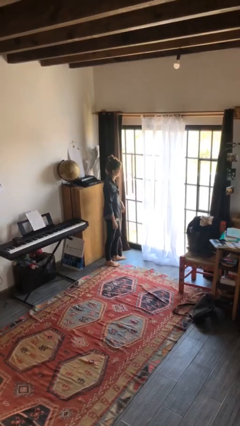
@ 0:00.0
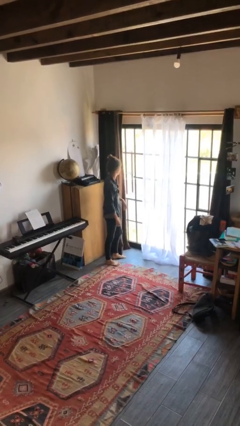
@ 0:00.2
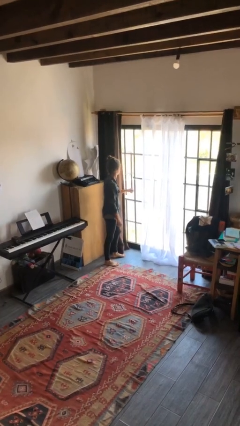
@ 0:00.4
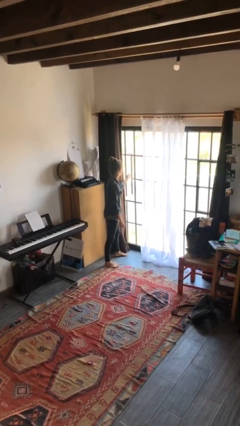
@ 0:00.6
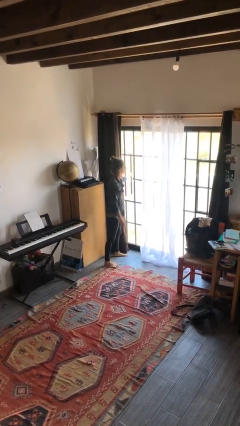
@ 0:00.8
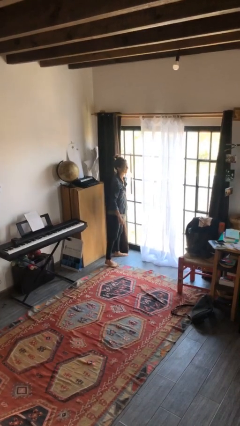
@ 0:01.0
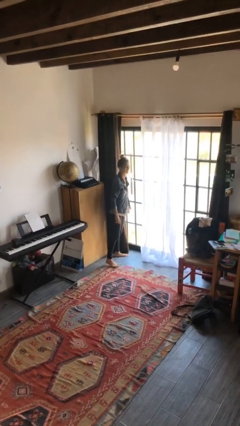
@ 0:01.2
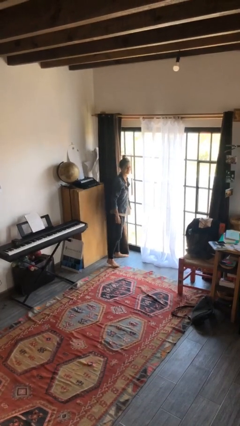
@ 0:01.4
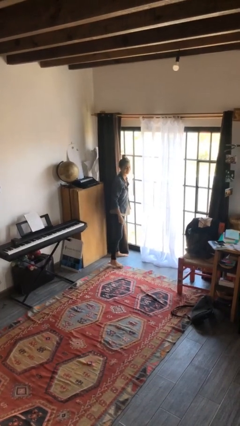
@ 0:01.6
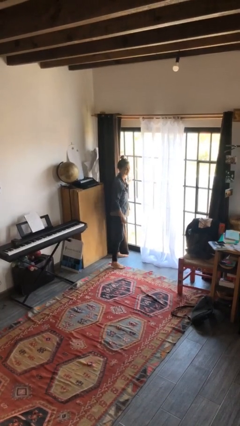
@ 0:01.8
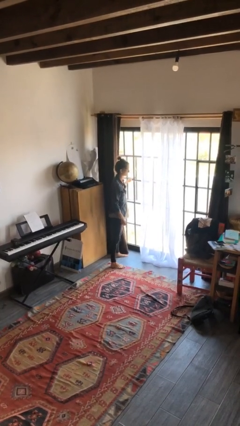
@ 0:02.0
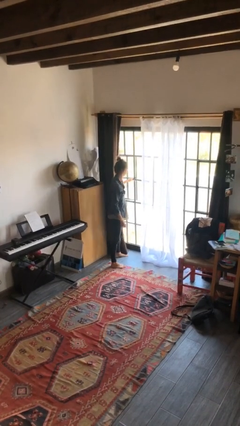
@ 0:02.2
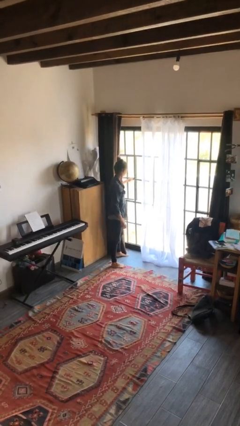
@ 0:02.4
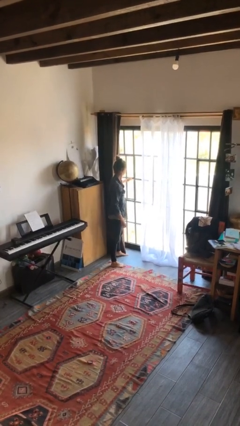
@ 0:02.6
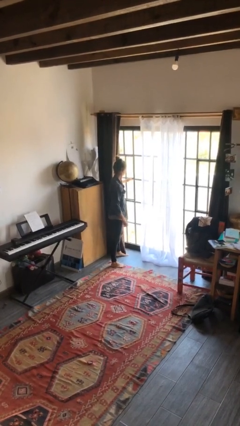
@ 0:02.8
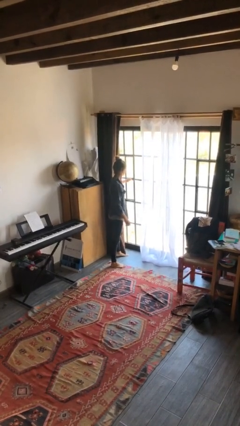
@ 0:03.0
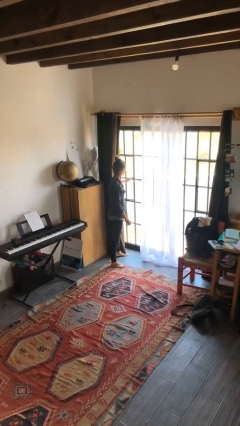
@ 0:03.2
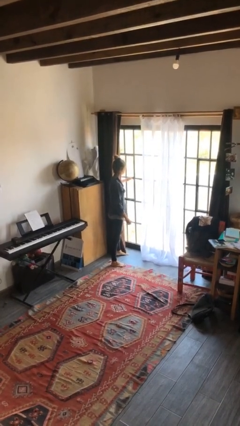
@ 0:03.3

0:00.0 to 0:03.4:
person closes home window

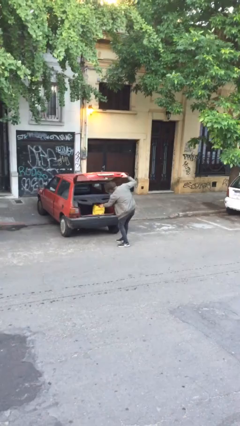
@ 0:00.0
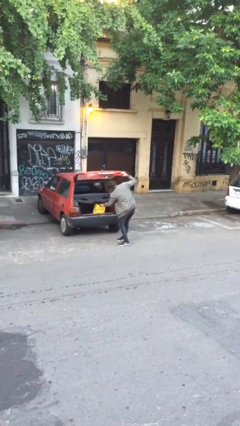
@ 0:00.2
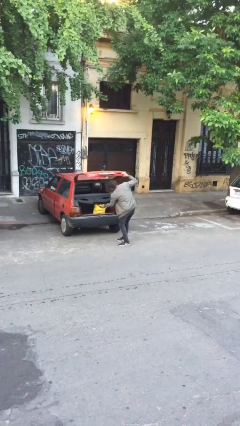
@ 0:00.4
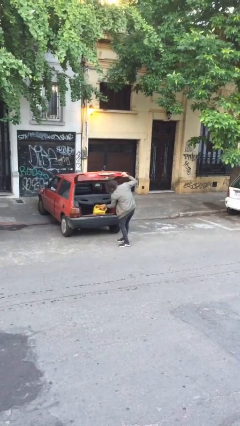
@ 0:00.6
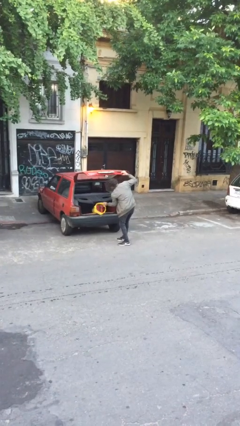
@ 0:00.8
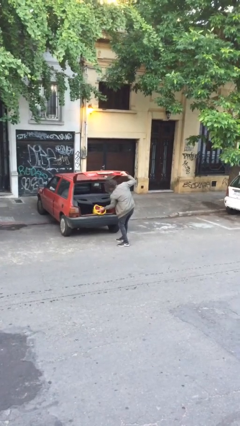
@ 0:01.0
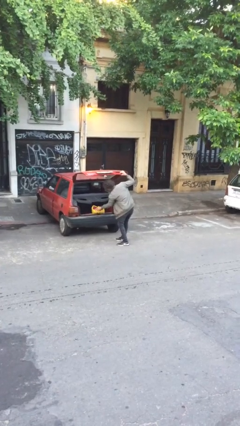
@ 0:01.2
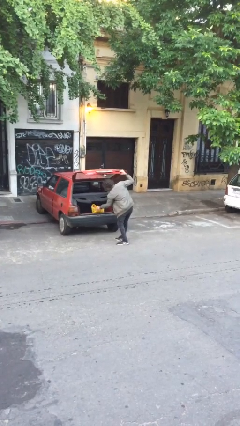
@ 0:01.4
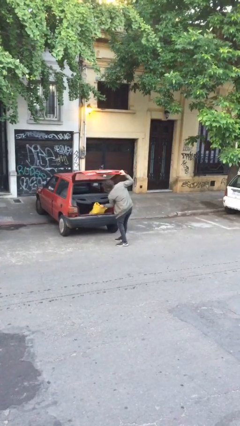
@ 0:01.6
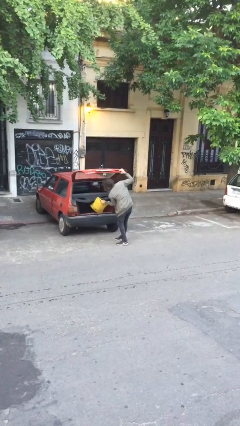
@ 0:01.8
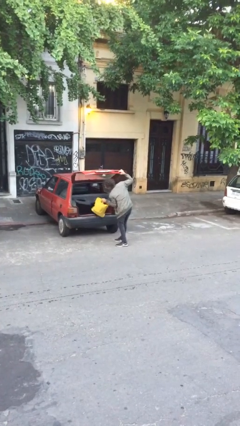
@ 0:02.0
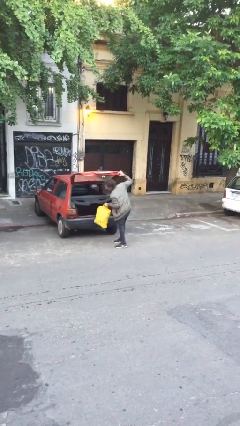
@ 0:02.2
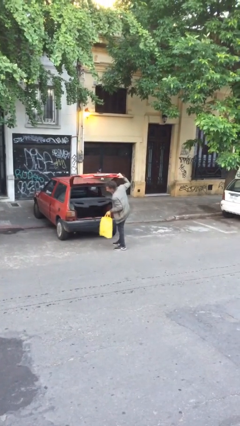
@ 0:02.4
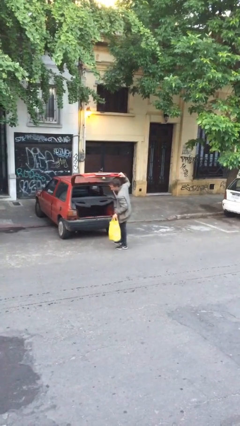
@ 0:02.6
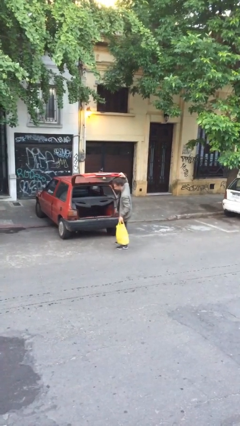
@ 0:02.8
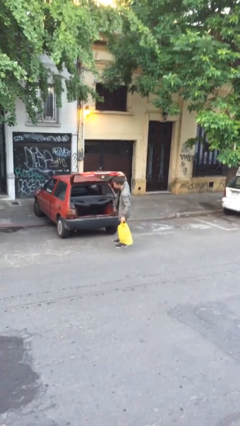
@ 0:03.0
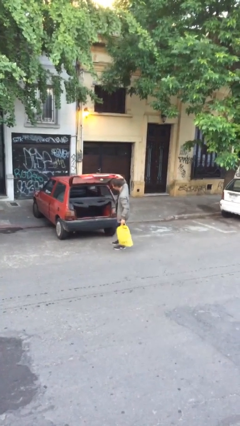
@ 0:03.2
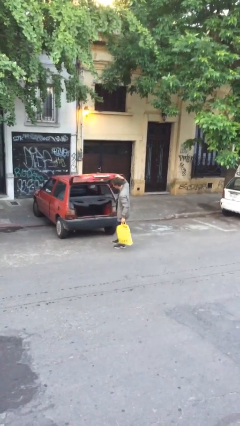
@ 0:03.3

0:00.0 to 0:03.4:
person unloads car

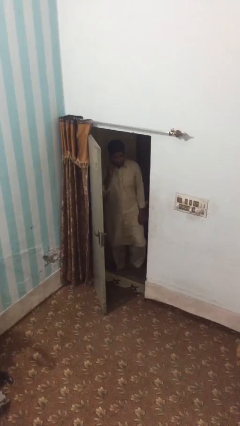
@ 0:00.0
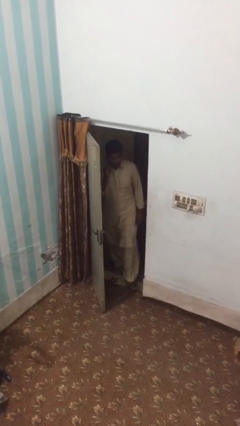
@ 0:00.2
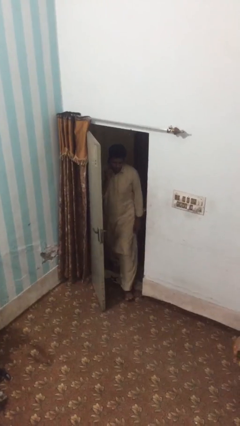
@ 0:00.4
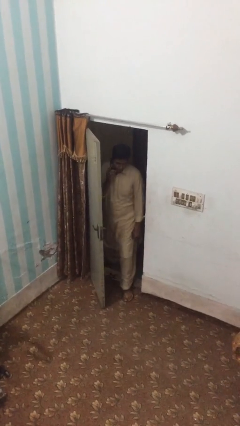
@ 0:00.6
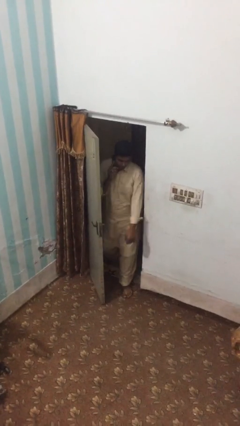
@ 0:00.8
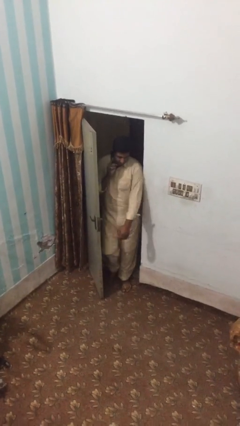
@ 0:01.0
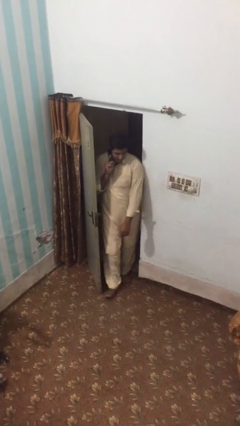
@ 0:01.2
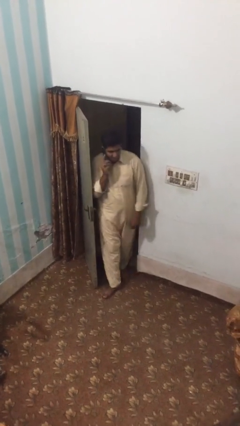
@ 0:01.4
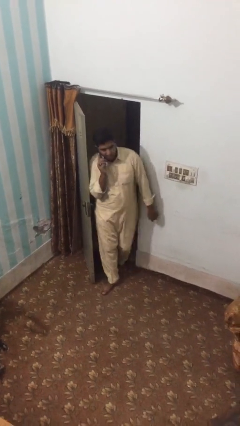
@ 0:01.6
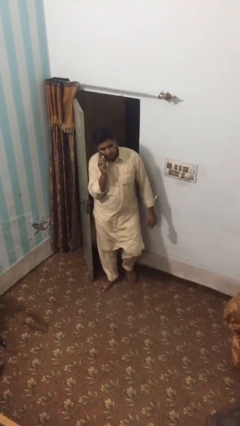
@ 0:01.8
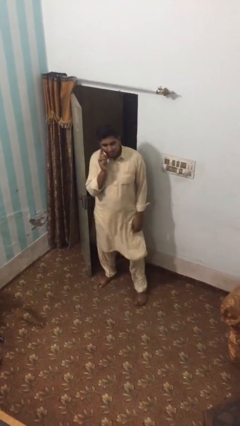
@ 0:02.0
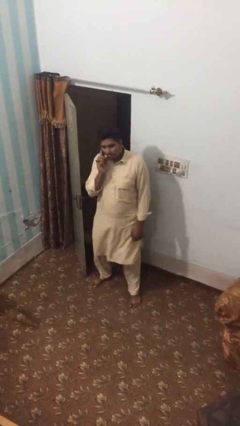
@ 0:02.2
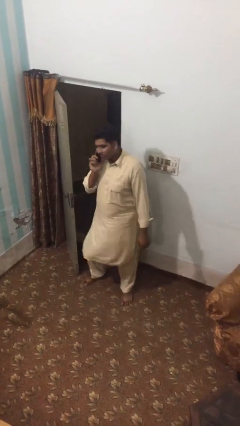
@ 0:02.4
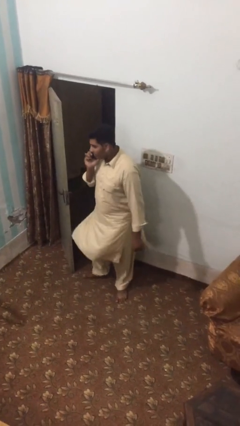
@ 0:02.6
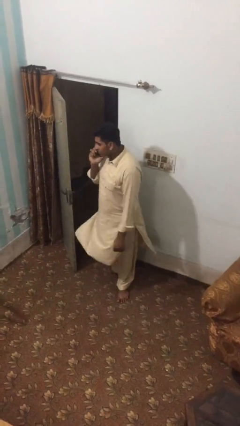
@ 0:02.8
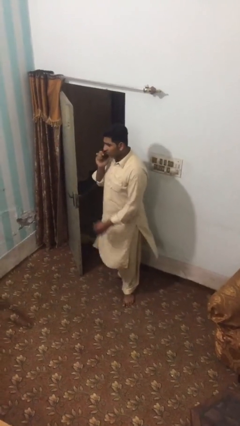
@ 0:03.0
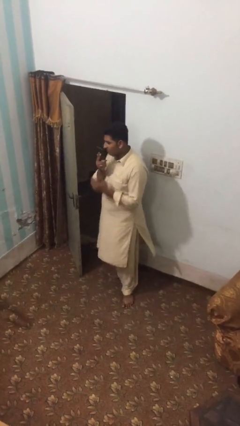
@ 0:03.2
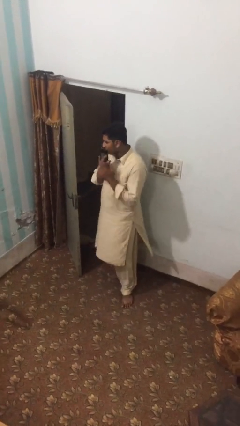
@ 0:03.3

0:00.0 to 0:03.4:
person enters scene through structure

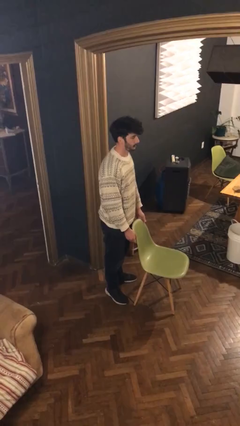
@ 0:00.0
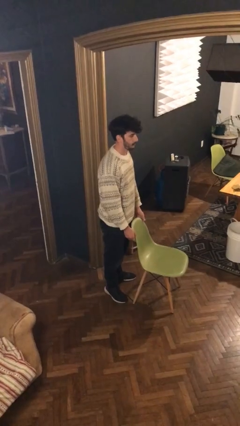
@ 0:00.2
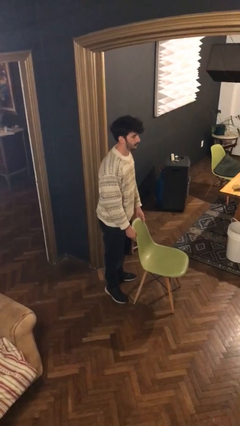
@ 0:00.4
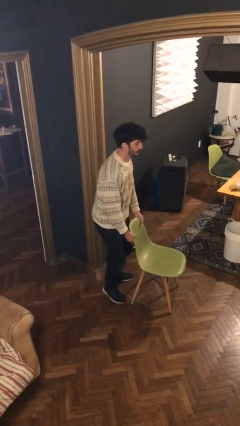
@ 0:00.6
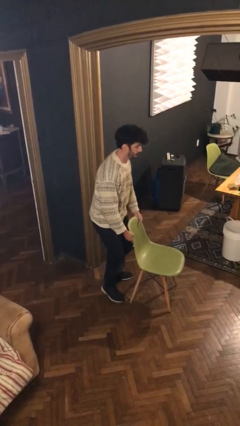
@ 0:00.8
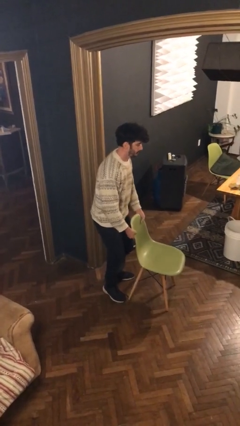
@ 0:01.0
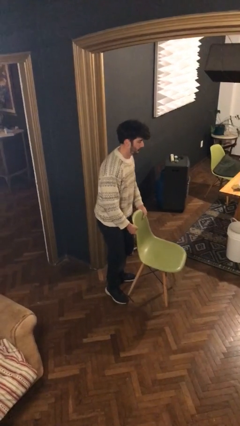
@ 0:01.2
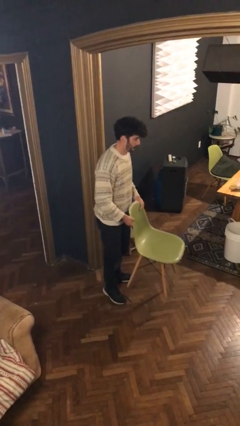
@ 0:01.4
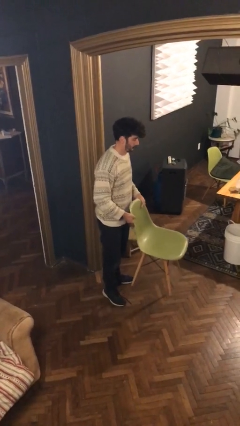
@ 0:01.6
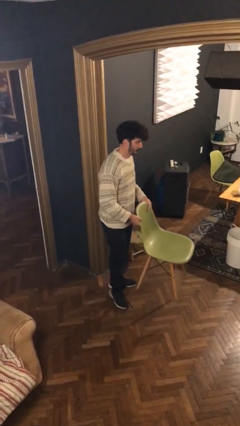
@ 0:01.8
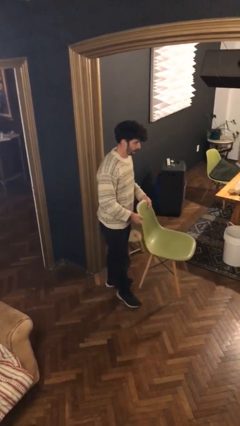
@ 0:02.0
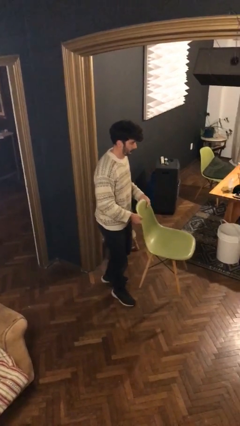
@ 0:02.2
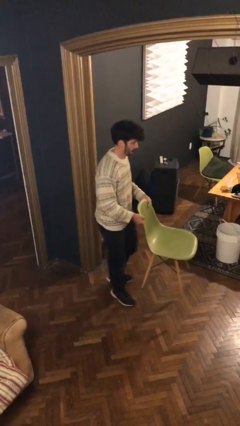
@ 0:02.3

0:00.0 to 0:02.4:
person picks up object from floor

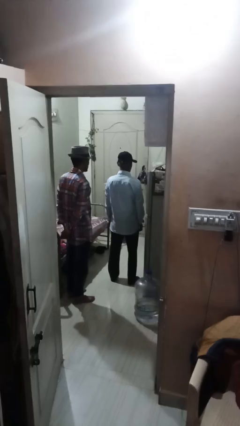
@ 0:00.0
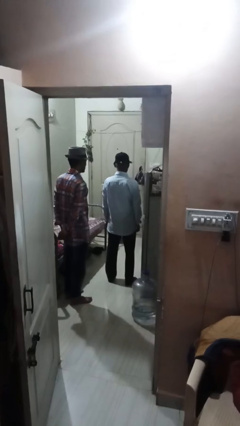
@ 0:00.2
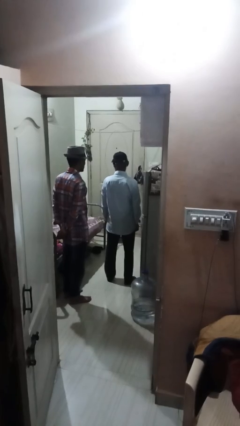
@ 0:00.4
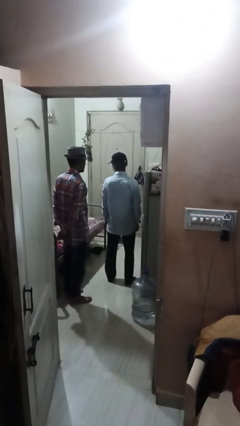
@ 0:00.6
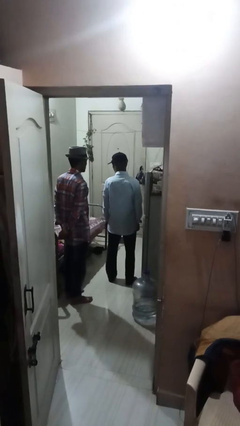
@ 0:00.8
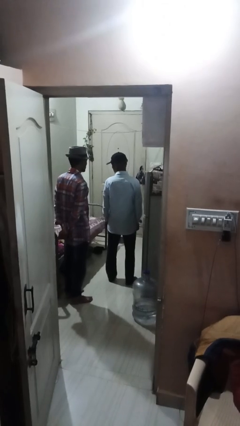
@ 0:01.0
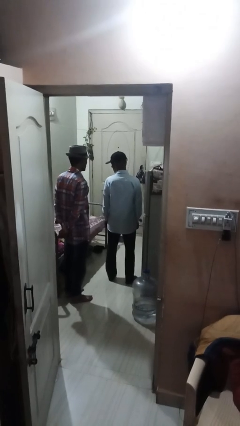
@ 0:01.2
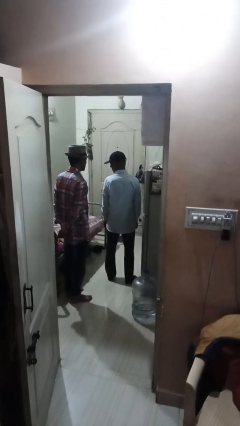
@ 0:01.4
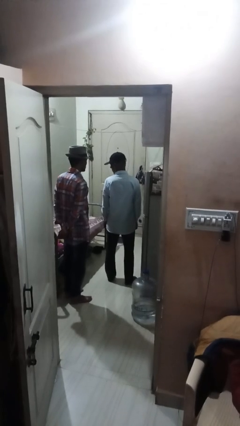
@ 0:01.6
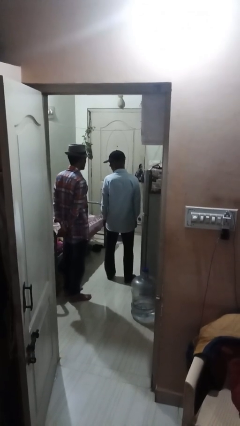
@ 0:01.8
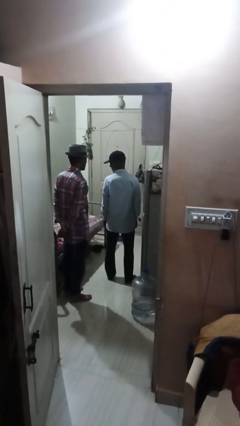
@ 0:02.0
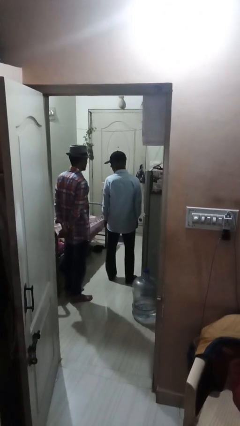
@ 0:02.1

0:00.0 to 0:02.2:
person looks over shoulder

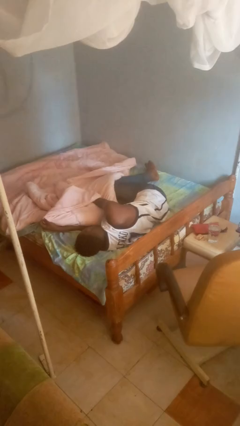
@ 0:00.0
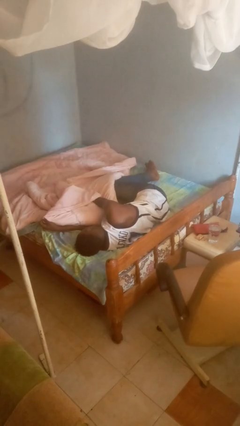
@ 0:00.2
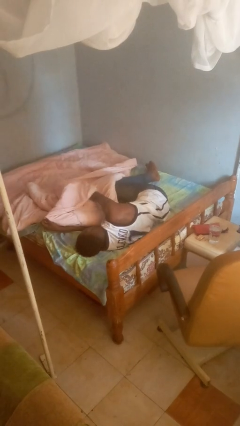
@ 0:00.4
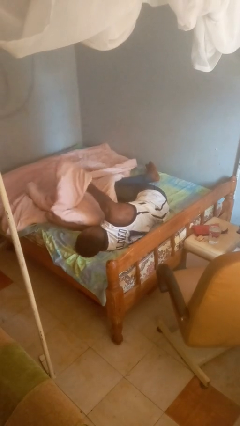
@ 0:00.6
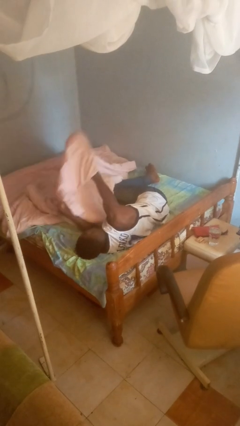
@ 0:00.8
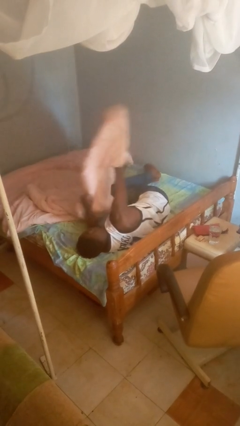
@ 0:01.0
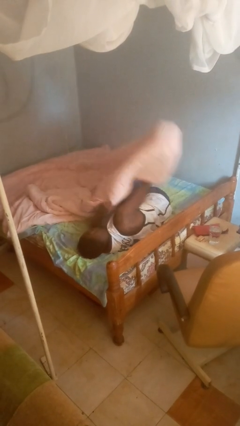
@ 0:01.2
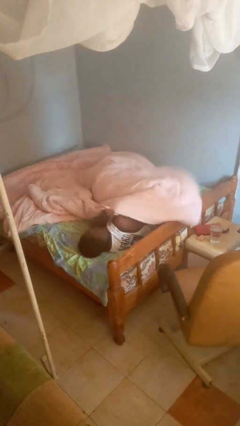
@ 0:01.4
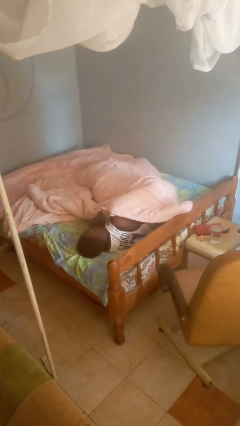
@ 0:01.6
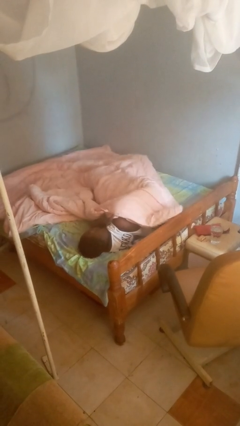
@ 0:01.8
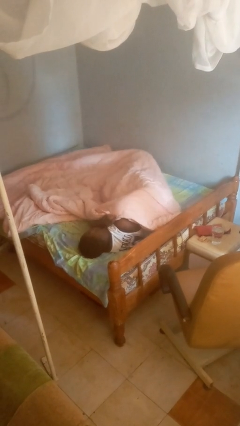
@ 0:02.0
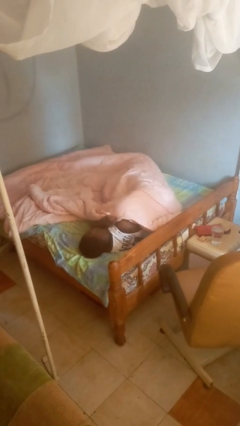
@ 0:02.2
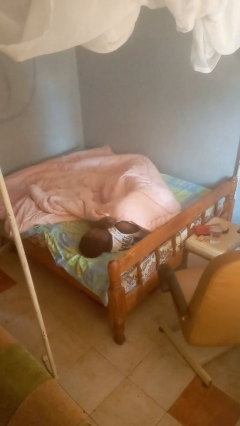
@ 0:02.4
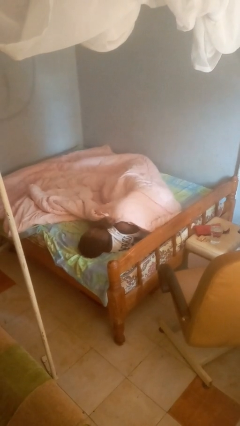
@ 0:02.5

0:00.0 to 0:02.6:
person covers with blanket
